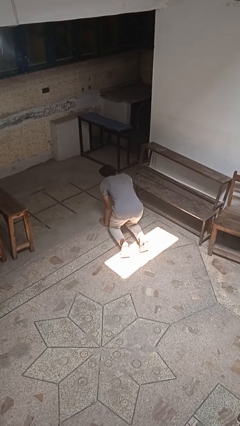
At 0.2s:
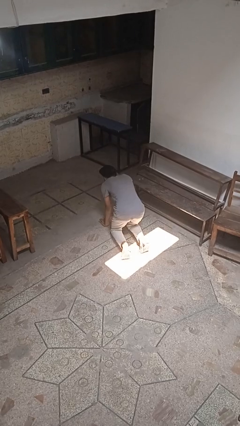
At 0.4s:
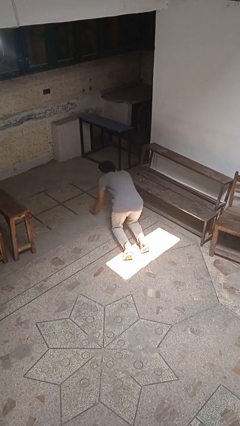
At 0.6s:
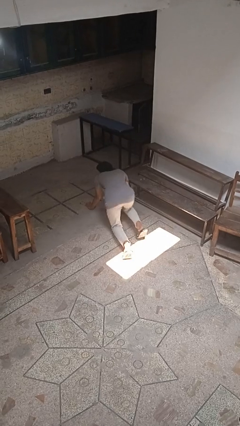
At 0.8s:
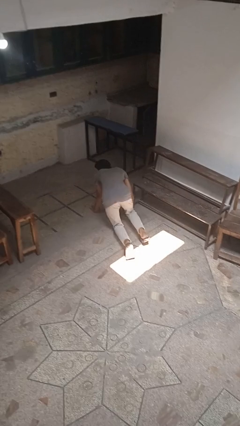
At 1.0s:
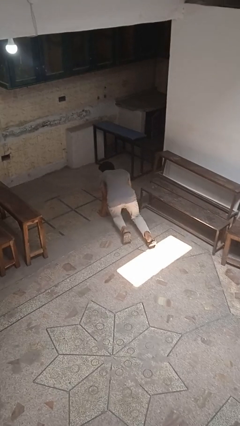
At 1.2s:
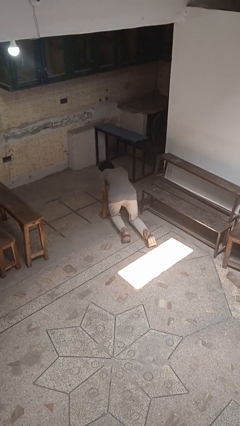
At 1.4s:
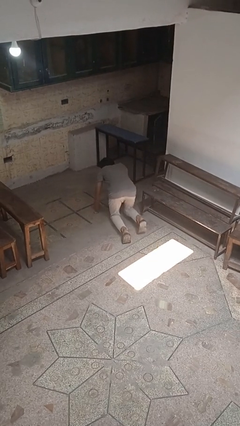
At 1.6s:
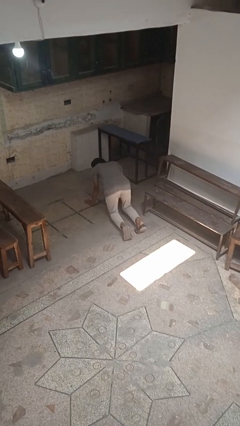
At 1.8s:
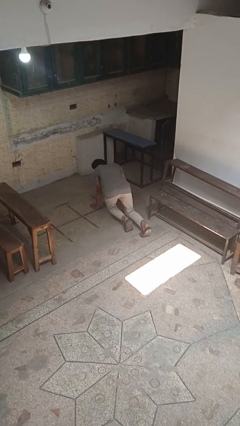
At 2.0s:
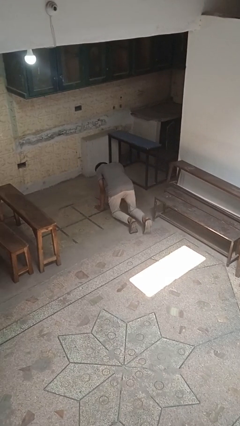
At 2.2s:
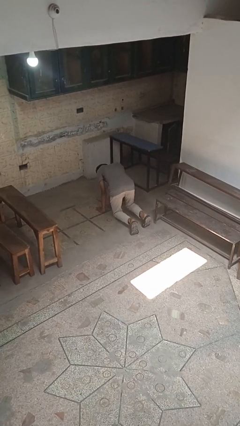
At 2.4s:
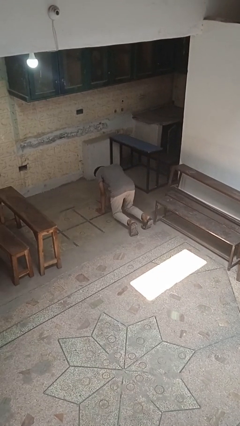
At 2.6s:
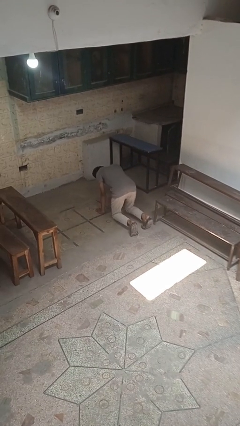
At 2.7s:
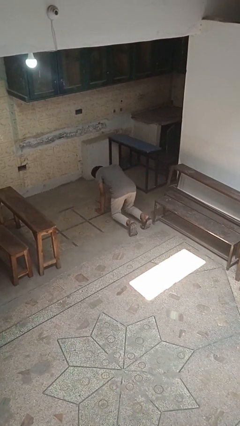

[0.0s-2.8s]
person crawls

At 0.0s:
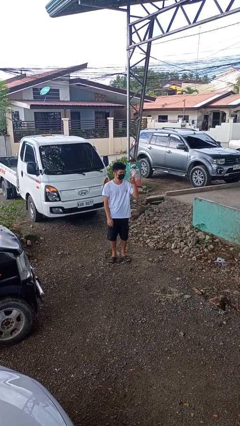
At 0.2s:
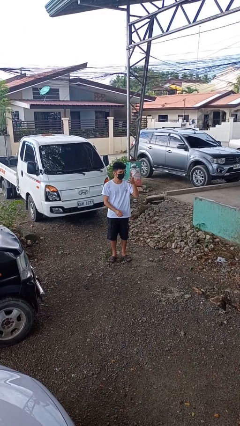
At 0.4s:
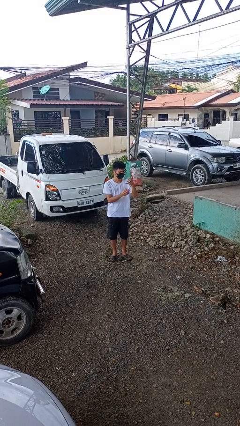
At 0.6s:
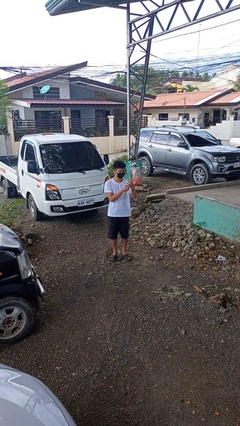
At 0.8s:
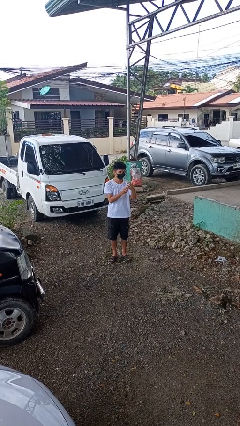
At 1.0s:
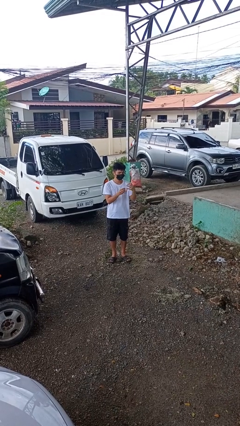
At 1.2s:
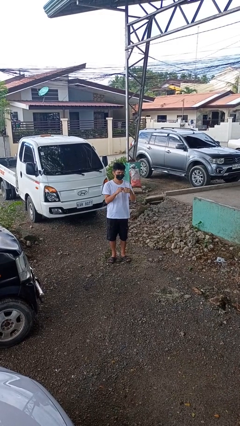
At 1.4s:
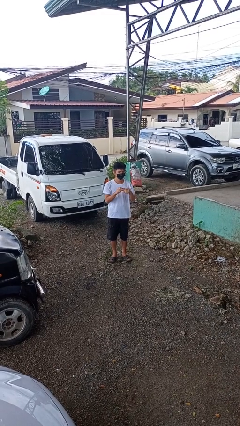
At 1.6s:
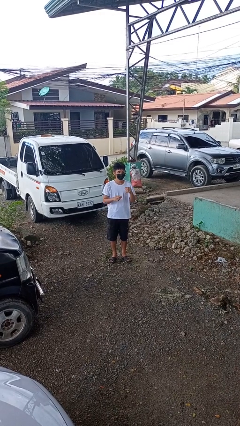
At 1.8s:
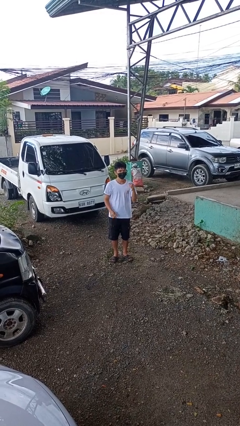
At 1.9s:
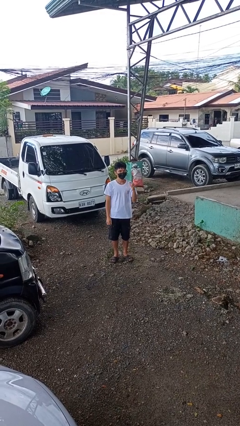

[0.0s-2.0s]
person takes off ring

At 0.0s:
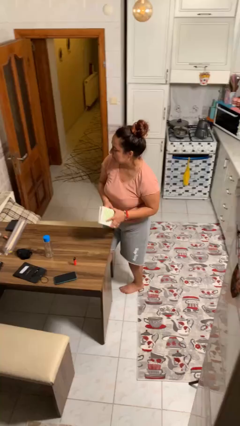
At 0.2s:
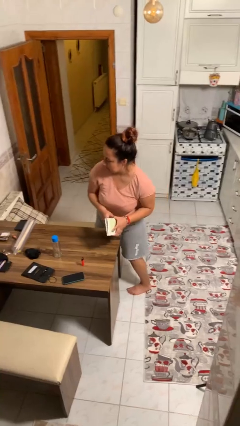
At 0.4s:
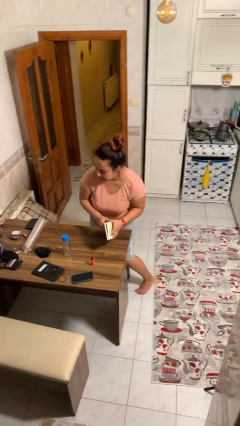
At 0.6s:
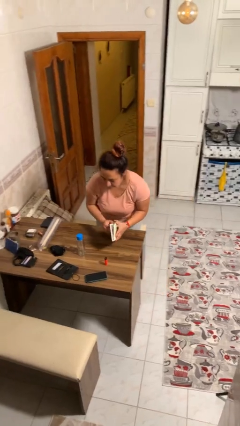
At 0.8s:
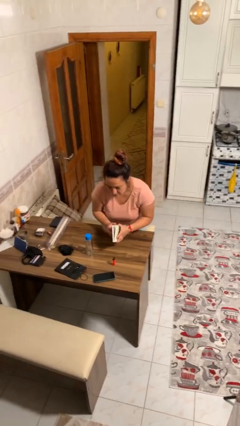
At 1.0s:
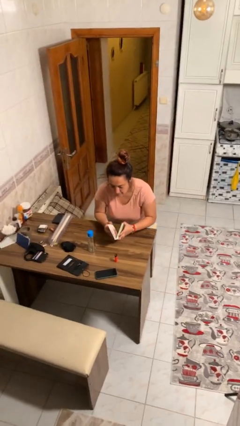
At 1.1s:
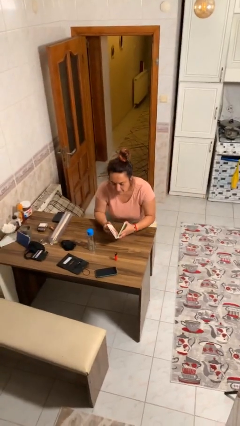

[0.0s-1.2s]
person sits down

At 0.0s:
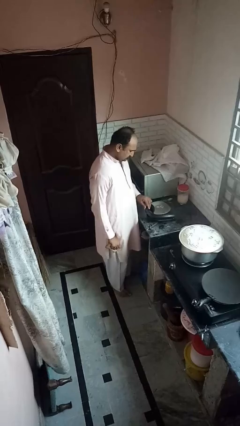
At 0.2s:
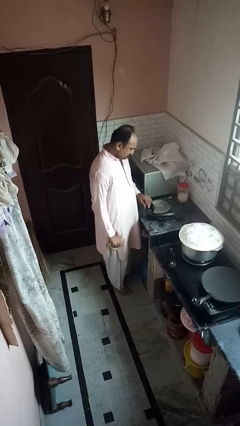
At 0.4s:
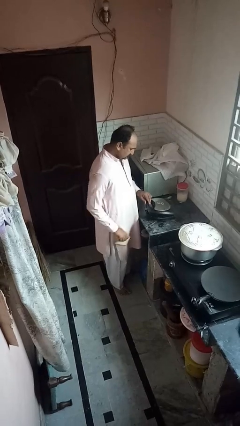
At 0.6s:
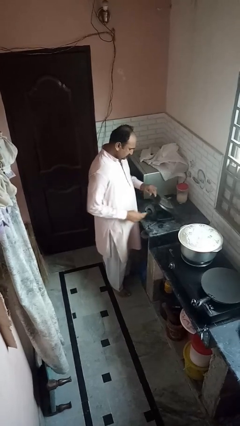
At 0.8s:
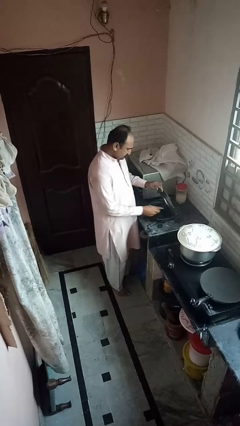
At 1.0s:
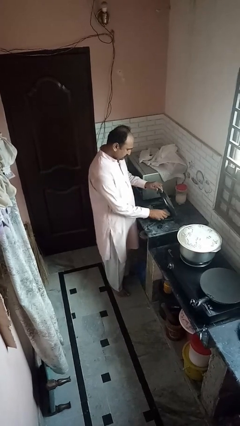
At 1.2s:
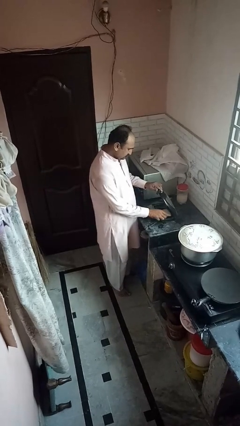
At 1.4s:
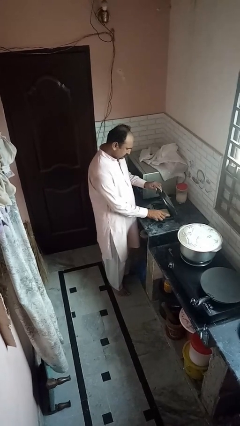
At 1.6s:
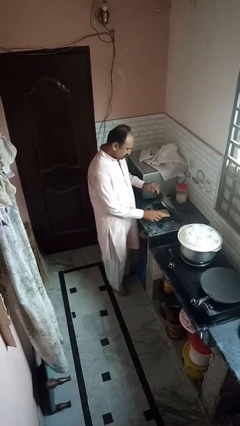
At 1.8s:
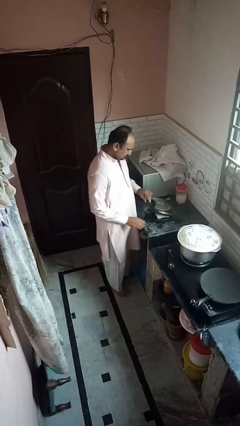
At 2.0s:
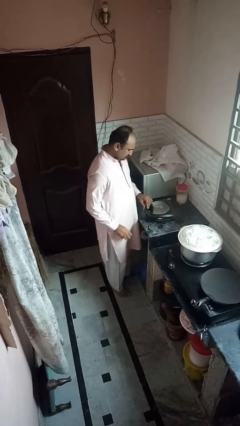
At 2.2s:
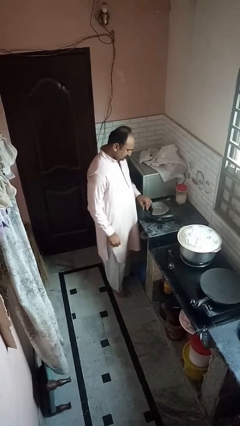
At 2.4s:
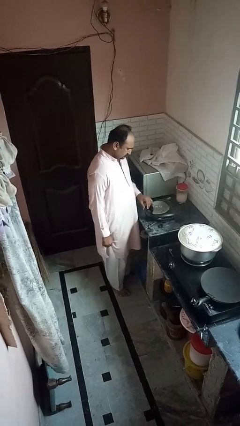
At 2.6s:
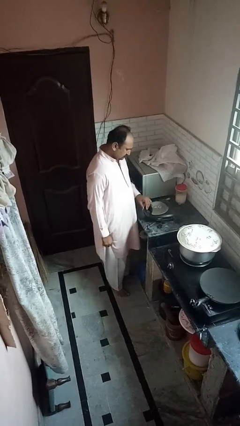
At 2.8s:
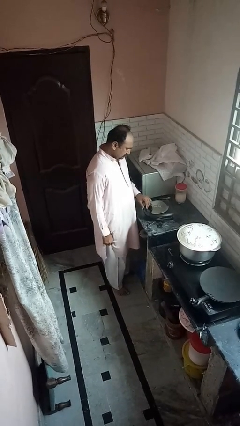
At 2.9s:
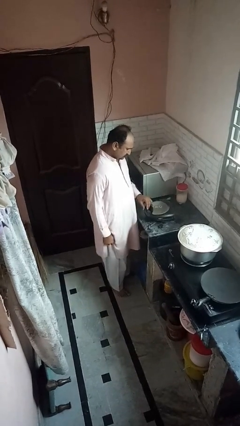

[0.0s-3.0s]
person puts object into toaster

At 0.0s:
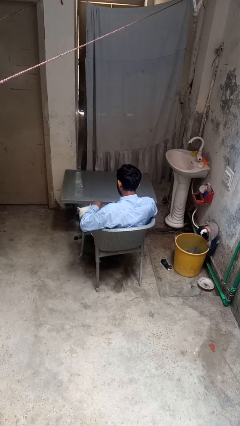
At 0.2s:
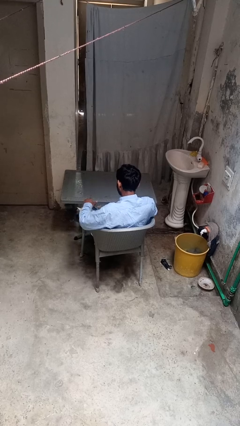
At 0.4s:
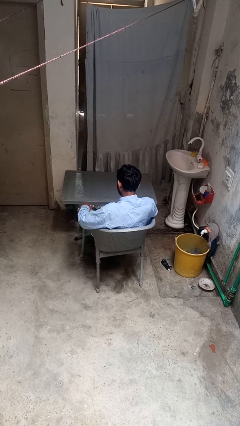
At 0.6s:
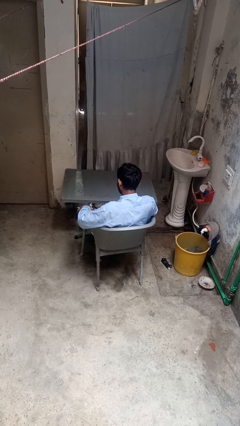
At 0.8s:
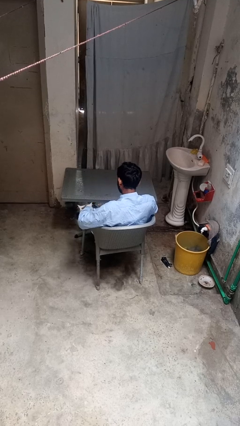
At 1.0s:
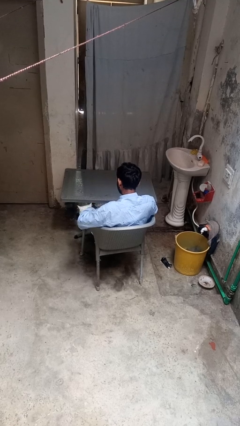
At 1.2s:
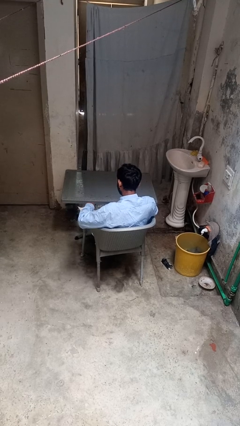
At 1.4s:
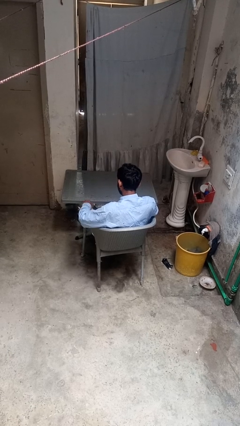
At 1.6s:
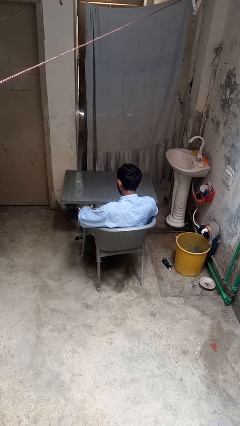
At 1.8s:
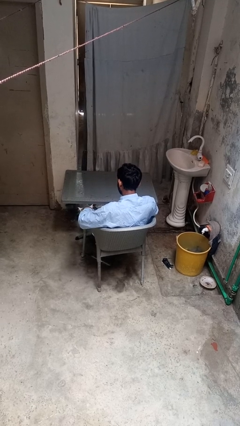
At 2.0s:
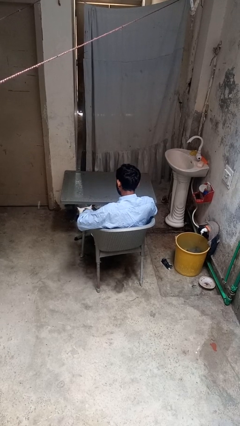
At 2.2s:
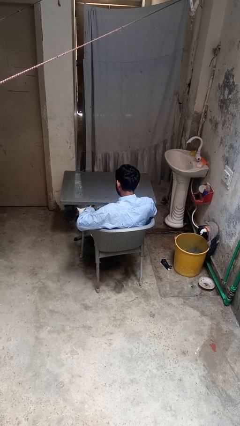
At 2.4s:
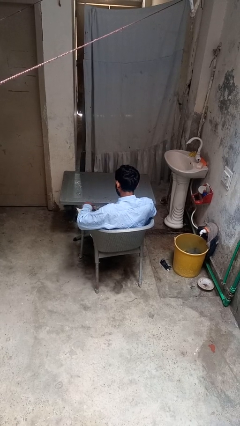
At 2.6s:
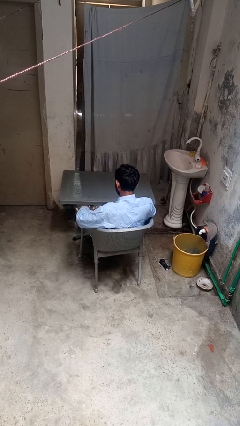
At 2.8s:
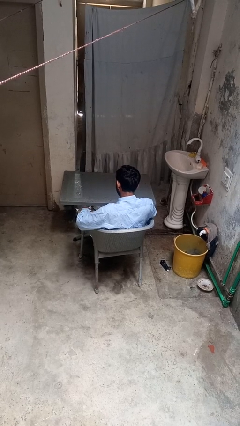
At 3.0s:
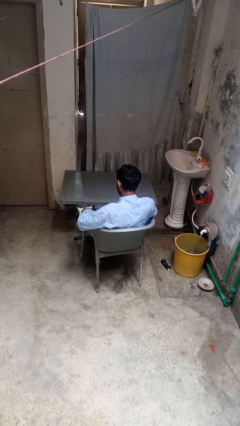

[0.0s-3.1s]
person pets cat

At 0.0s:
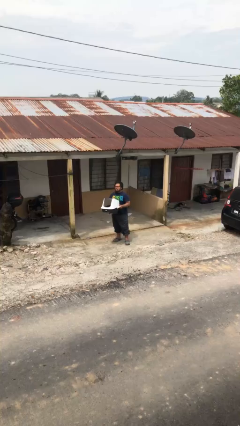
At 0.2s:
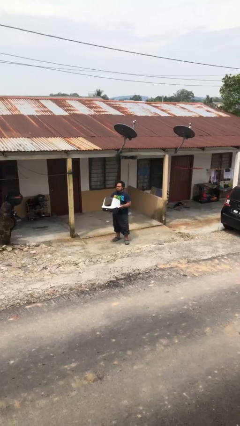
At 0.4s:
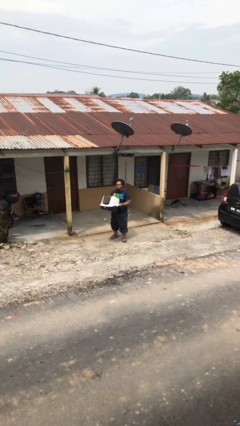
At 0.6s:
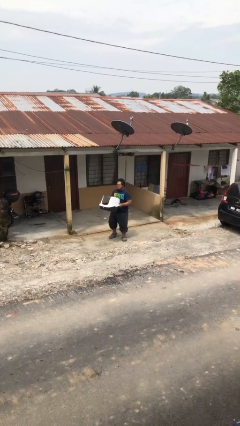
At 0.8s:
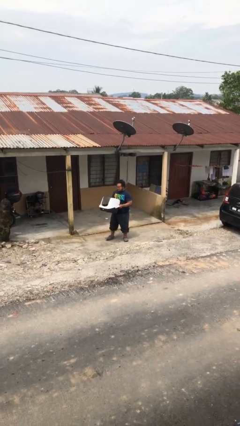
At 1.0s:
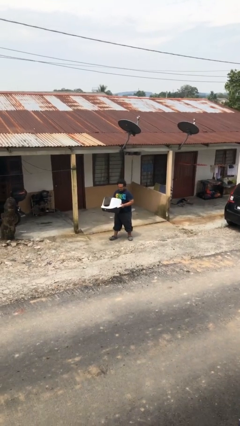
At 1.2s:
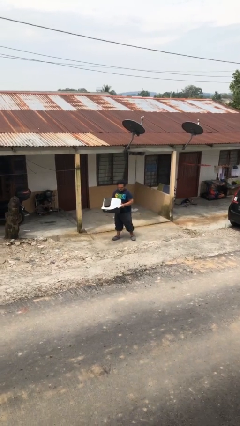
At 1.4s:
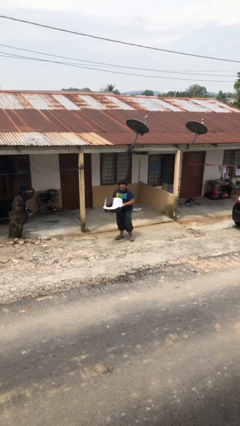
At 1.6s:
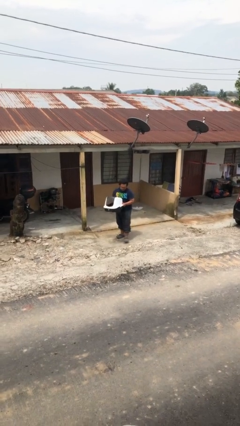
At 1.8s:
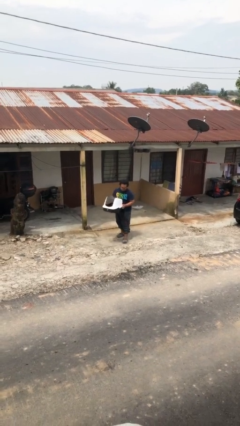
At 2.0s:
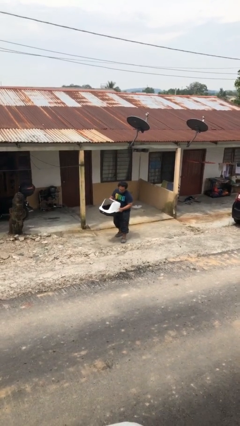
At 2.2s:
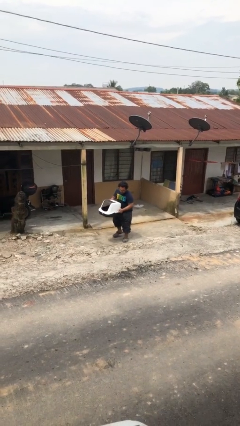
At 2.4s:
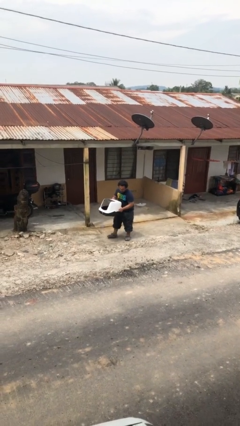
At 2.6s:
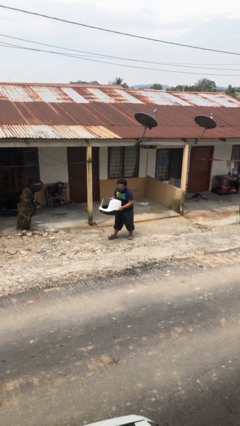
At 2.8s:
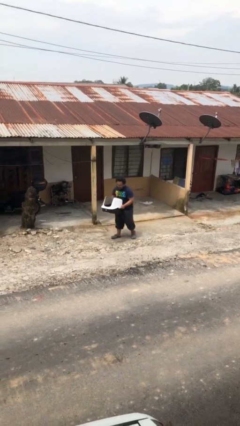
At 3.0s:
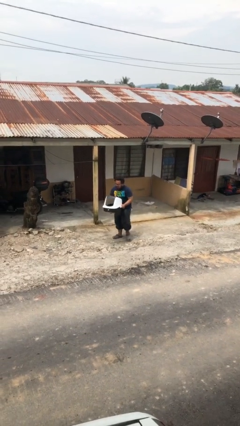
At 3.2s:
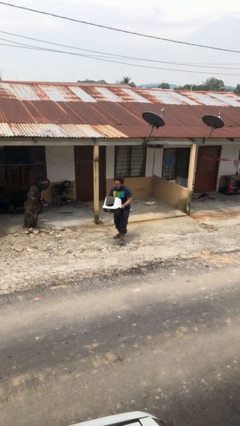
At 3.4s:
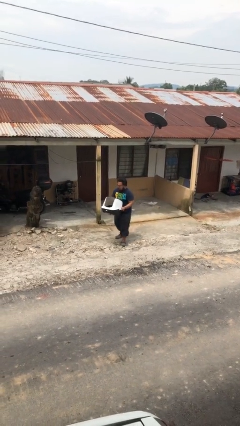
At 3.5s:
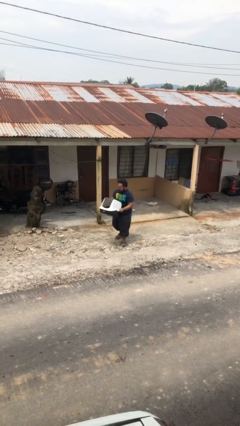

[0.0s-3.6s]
person carries heavy object

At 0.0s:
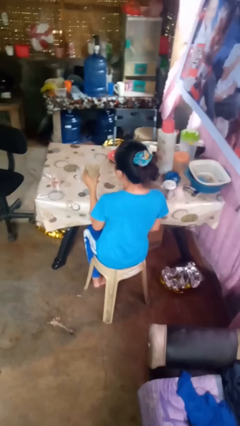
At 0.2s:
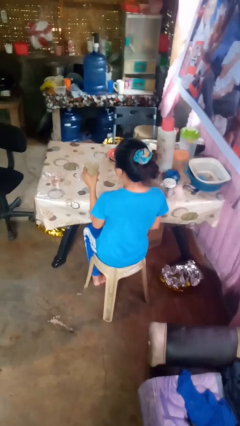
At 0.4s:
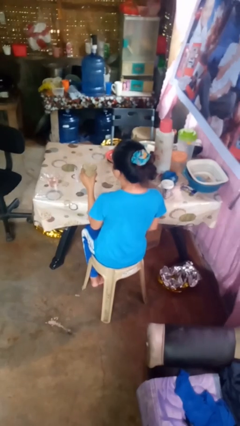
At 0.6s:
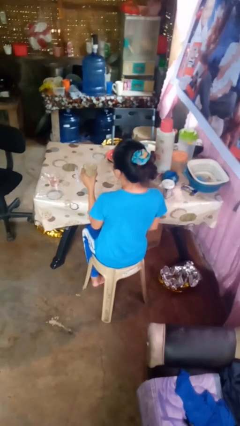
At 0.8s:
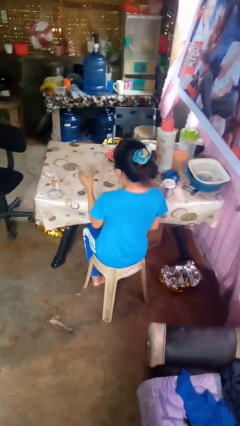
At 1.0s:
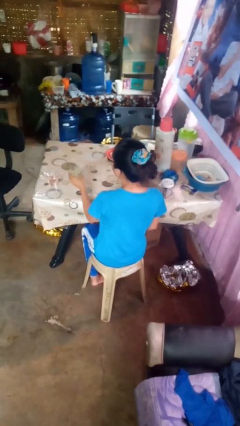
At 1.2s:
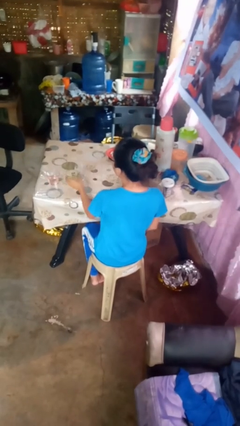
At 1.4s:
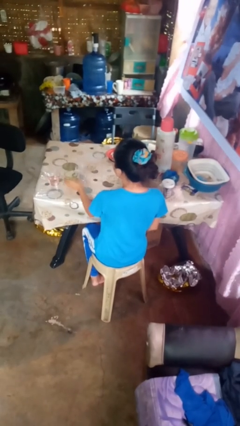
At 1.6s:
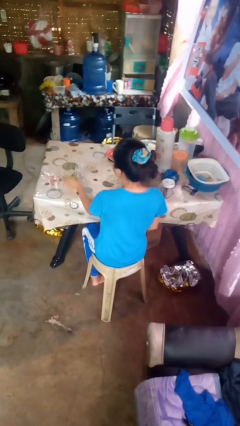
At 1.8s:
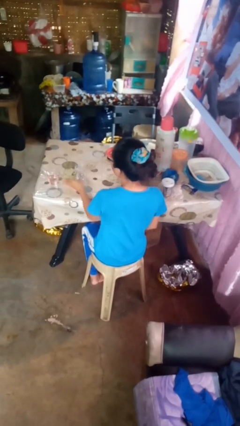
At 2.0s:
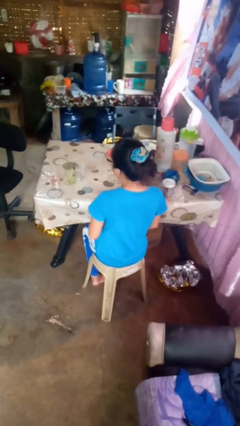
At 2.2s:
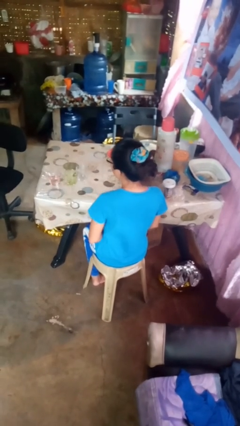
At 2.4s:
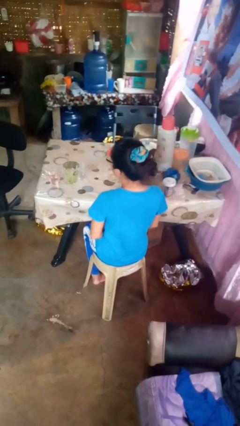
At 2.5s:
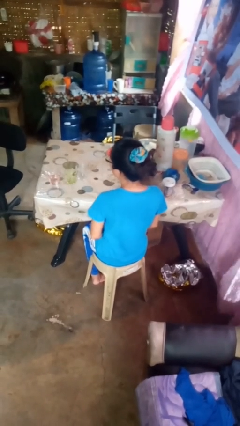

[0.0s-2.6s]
person puts down object on table
